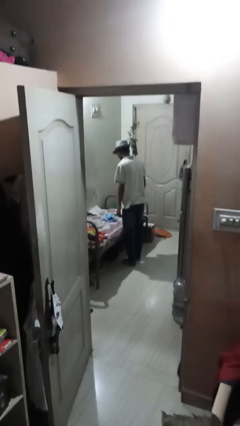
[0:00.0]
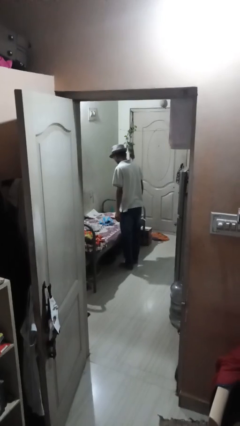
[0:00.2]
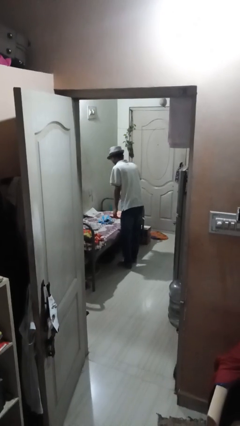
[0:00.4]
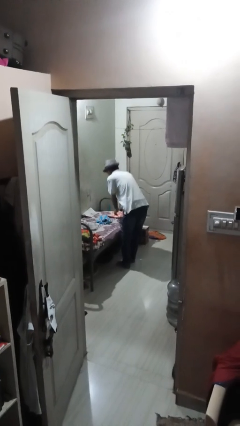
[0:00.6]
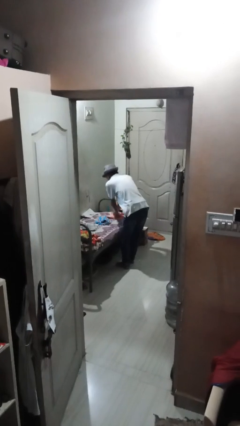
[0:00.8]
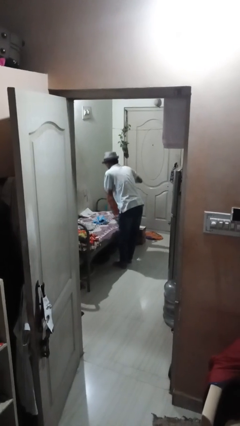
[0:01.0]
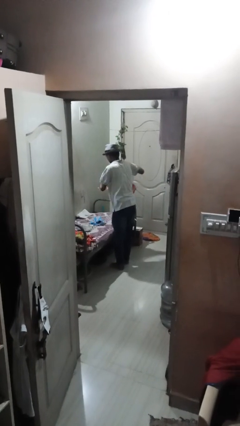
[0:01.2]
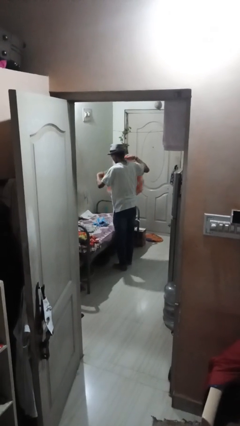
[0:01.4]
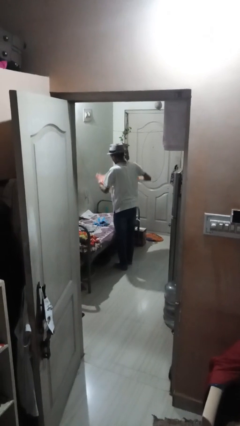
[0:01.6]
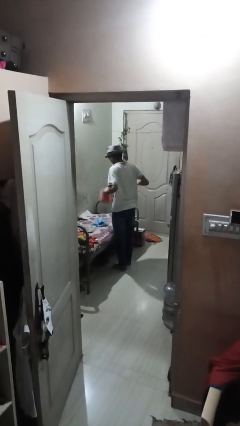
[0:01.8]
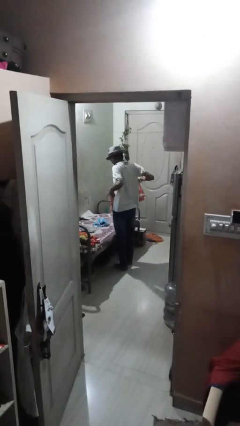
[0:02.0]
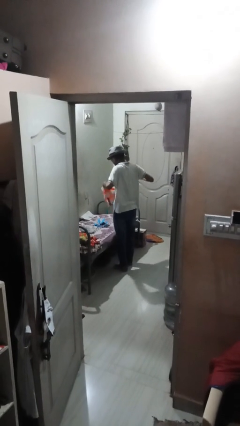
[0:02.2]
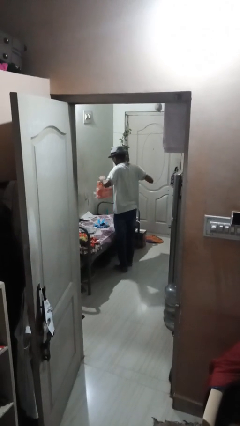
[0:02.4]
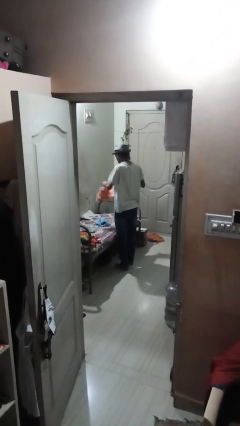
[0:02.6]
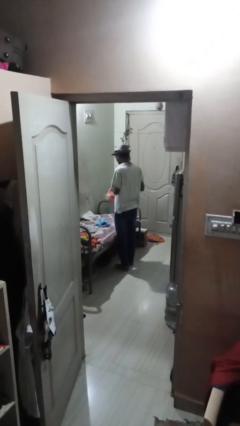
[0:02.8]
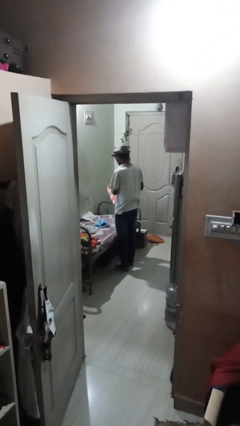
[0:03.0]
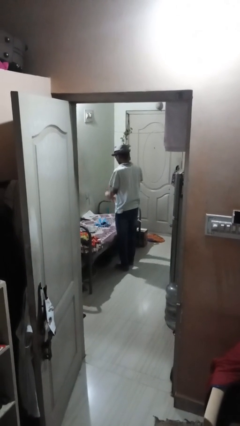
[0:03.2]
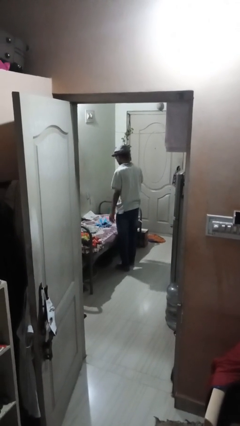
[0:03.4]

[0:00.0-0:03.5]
person folds towel

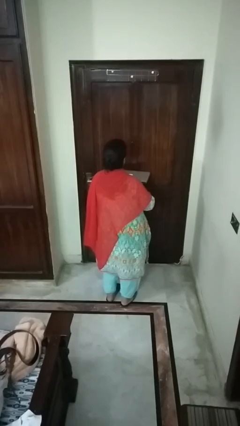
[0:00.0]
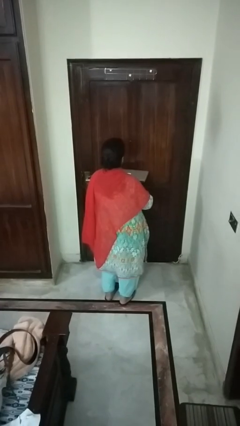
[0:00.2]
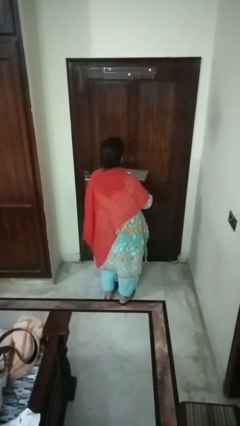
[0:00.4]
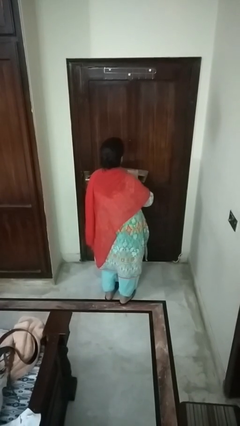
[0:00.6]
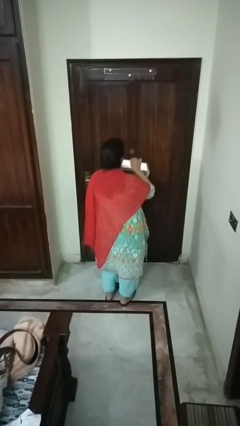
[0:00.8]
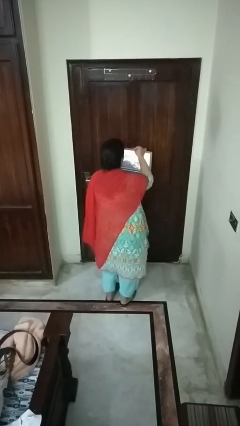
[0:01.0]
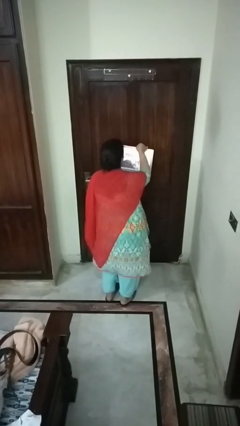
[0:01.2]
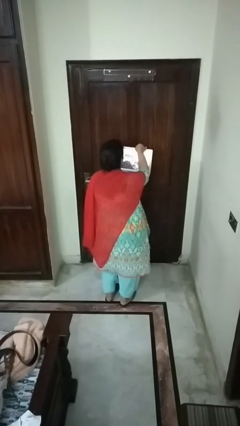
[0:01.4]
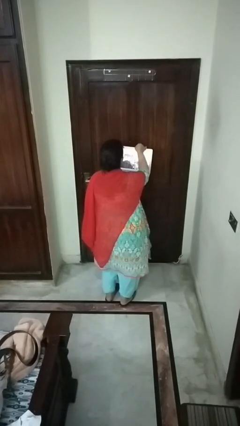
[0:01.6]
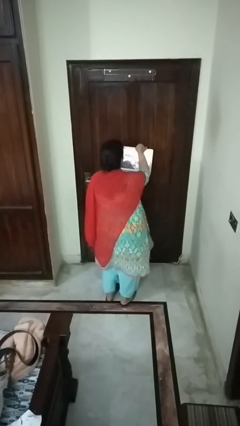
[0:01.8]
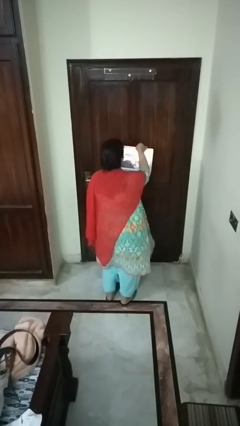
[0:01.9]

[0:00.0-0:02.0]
person opens laptop

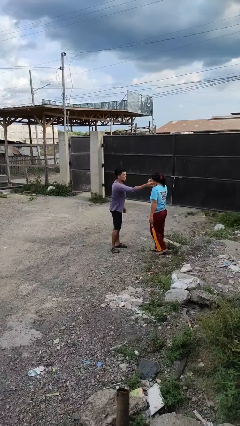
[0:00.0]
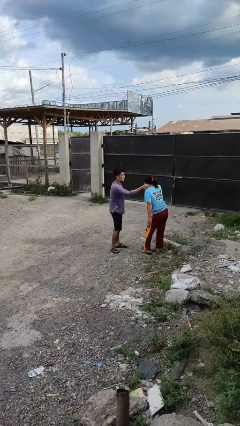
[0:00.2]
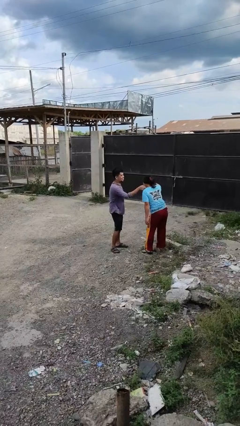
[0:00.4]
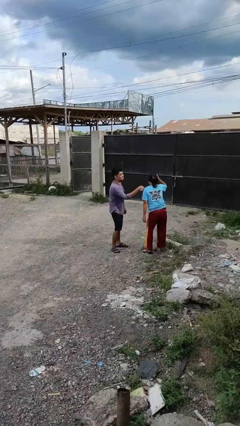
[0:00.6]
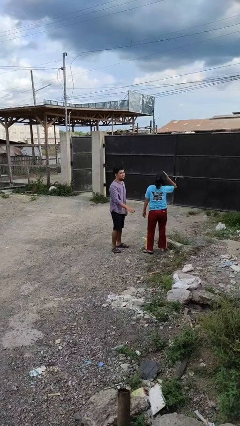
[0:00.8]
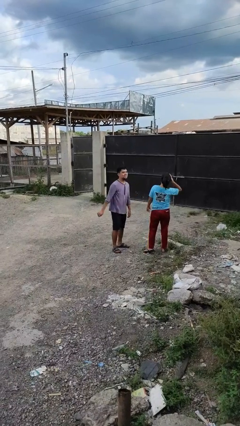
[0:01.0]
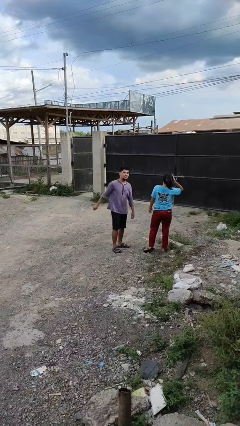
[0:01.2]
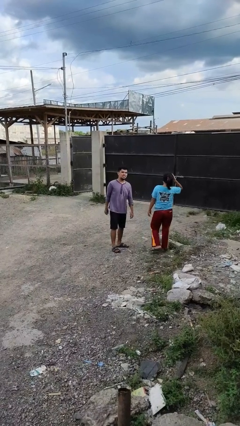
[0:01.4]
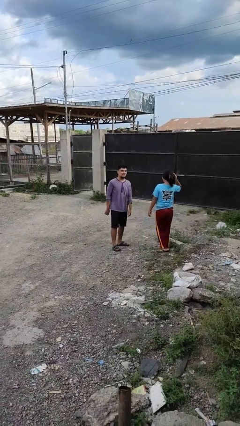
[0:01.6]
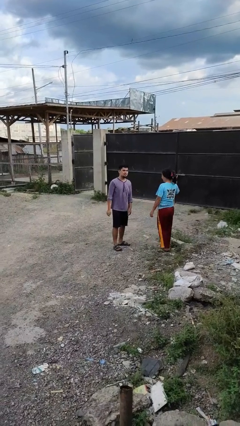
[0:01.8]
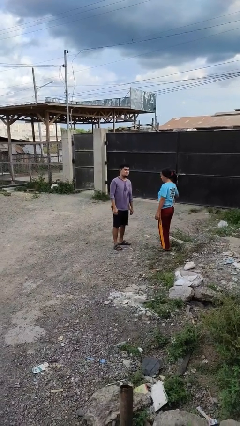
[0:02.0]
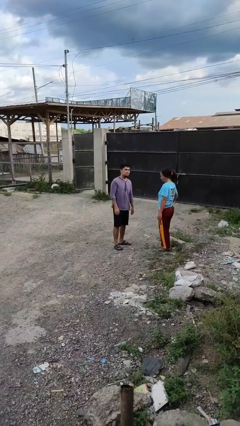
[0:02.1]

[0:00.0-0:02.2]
person tickles person

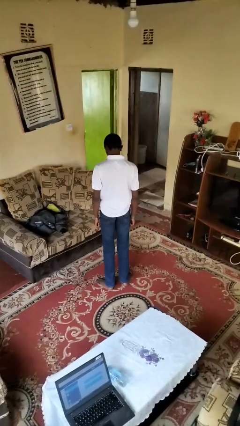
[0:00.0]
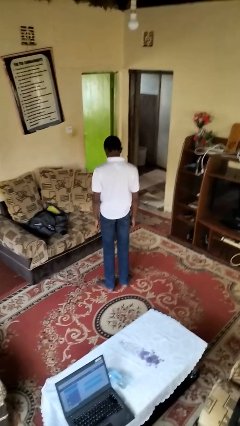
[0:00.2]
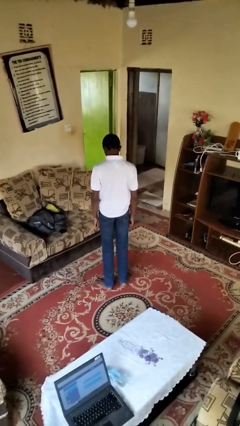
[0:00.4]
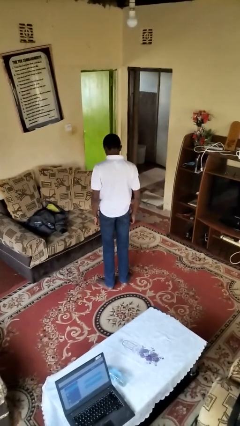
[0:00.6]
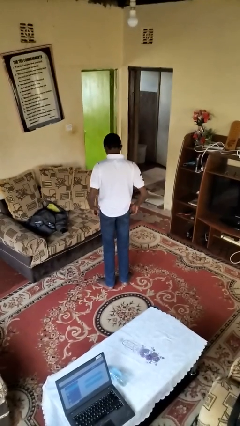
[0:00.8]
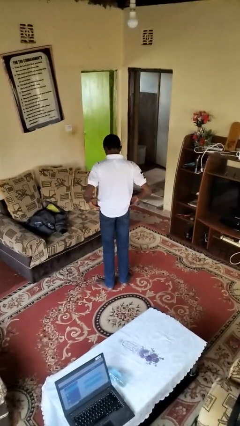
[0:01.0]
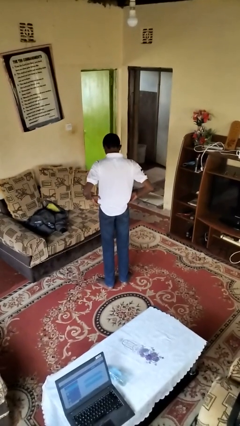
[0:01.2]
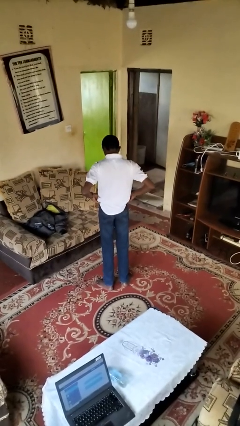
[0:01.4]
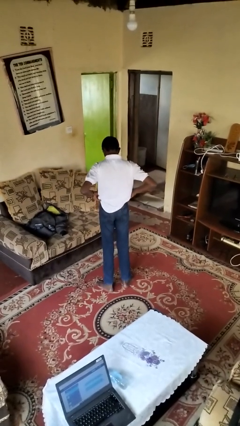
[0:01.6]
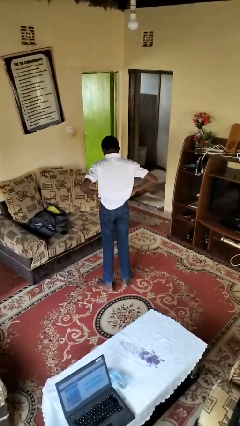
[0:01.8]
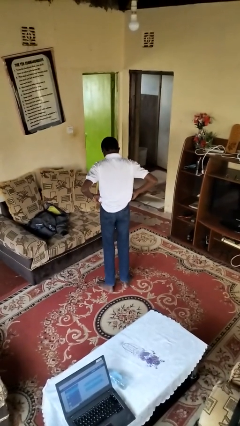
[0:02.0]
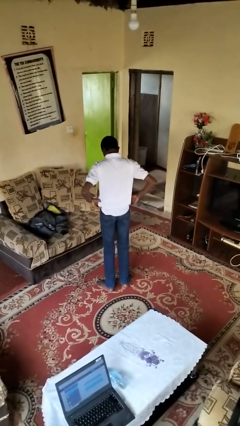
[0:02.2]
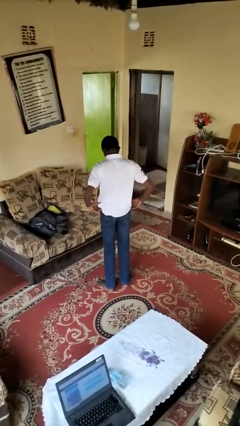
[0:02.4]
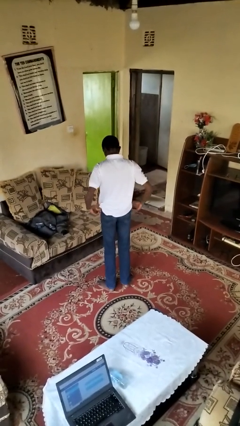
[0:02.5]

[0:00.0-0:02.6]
person hikes up pants

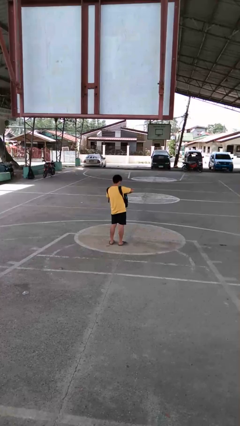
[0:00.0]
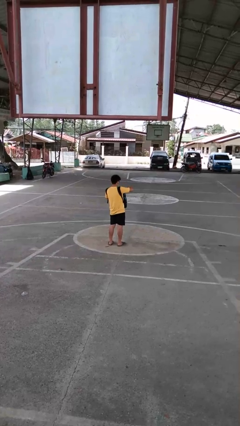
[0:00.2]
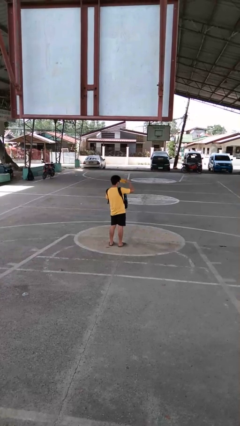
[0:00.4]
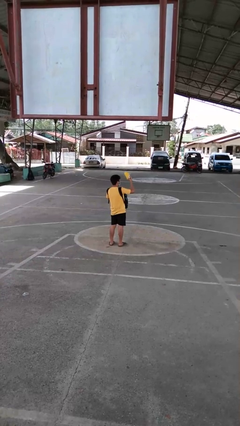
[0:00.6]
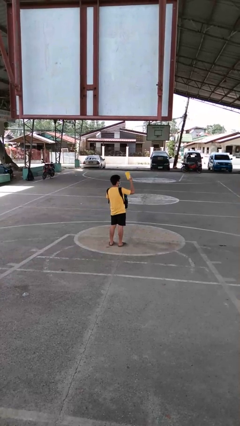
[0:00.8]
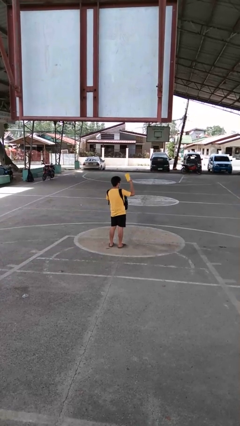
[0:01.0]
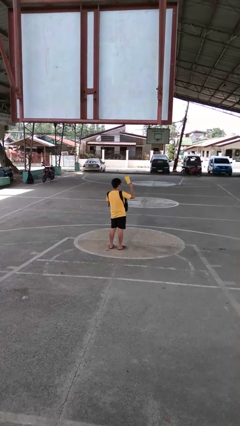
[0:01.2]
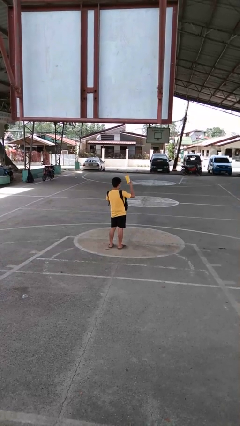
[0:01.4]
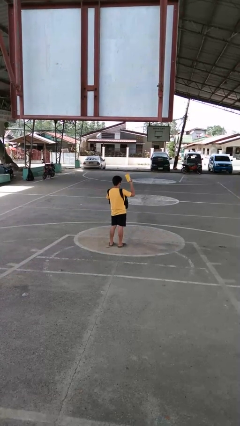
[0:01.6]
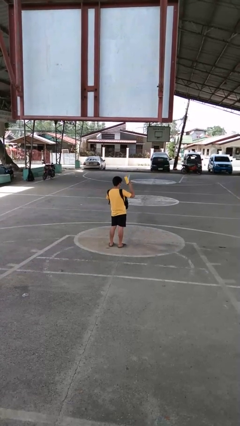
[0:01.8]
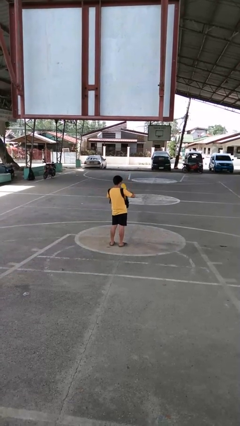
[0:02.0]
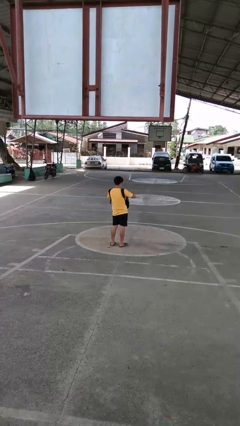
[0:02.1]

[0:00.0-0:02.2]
person takes object from purse

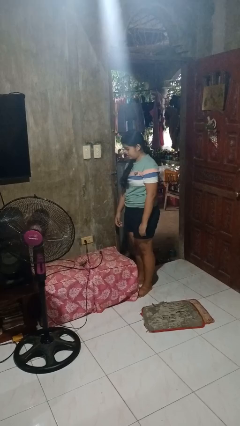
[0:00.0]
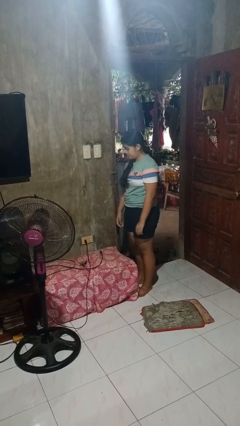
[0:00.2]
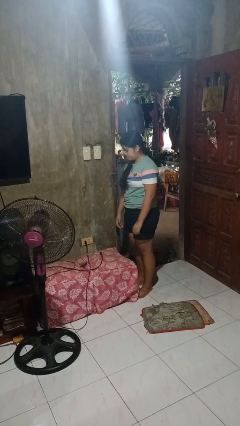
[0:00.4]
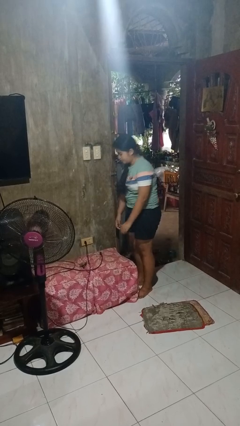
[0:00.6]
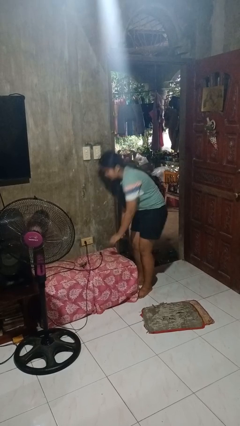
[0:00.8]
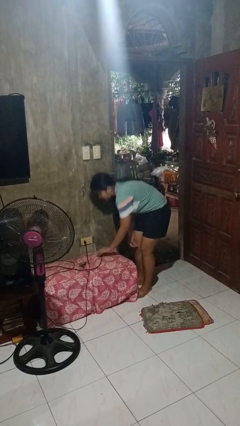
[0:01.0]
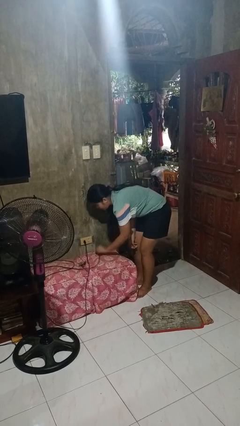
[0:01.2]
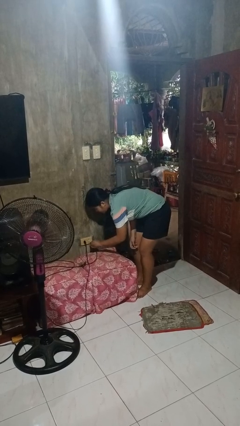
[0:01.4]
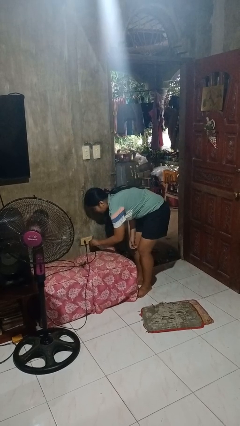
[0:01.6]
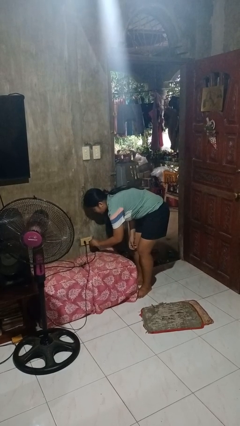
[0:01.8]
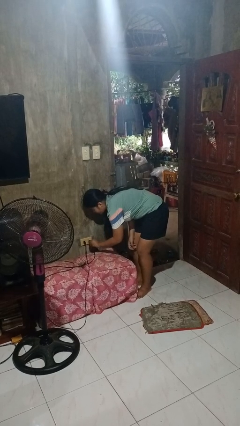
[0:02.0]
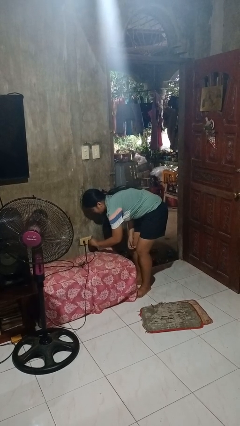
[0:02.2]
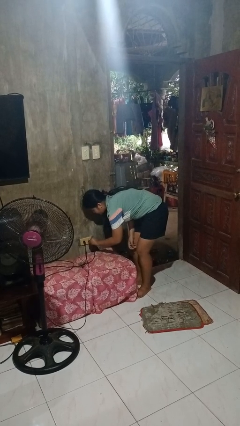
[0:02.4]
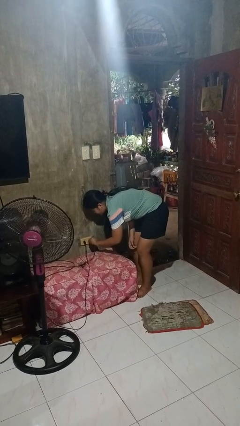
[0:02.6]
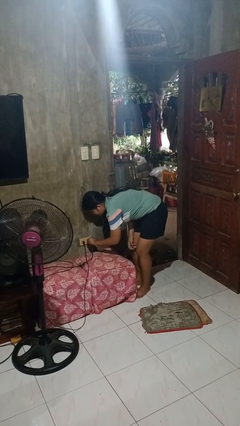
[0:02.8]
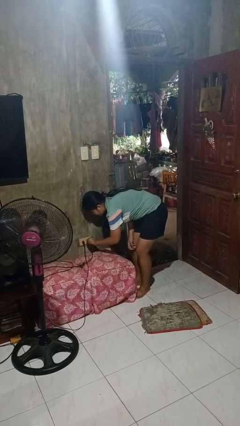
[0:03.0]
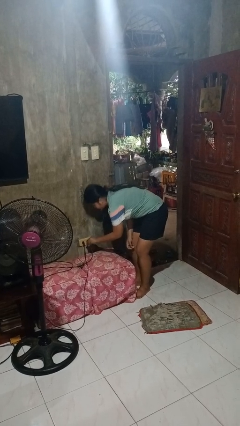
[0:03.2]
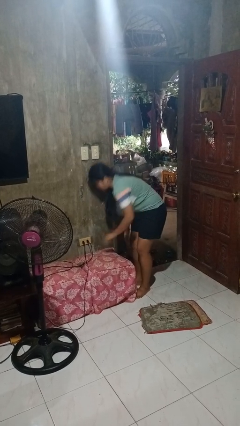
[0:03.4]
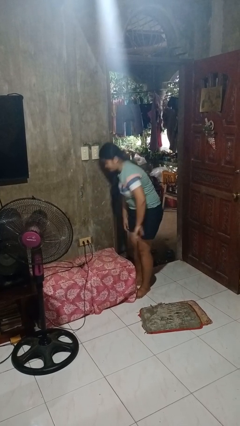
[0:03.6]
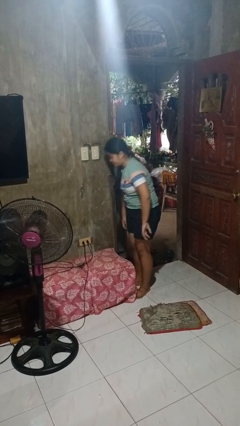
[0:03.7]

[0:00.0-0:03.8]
person plugs into electrical socket

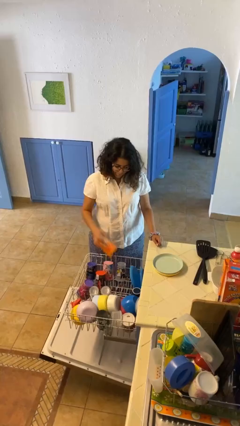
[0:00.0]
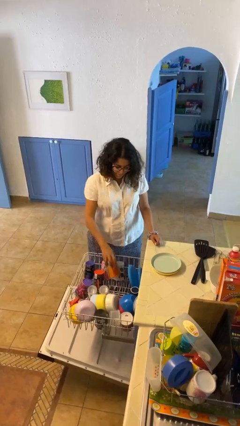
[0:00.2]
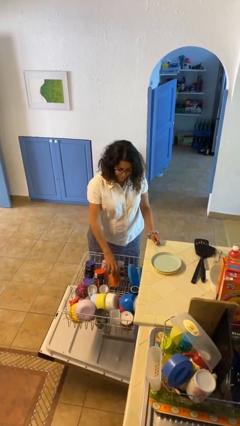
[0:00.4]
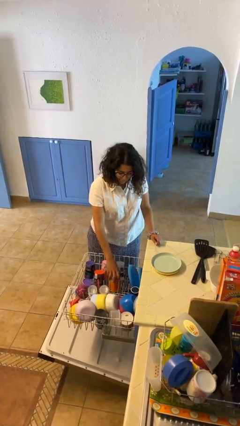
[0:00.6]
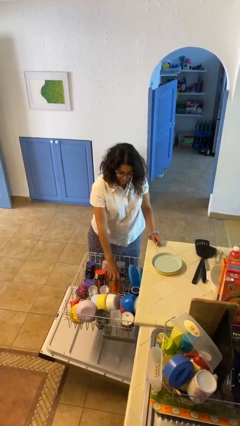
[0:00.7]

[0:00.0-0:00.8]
person loads dishwasher
